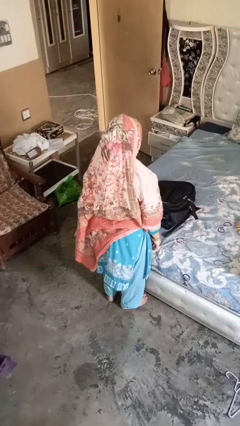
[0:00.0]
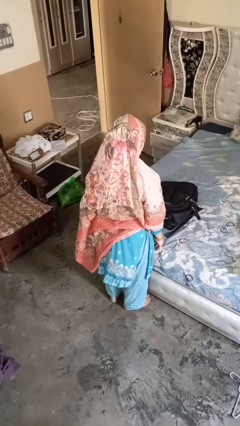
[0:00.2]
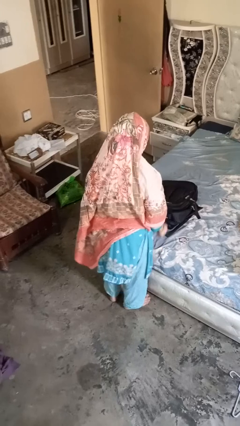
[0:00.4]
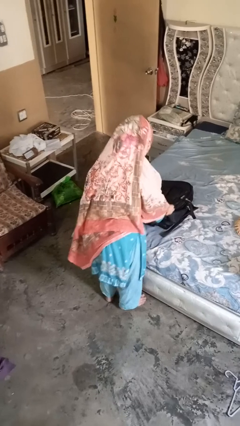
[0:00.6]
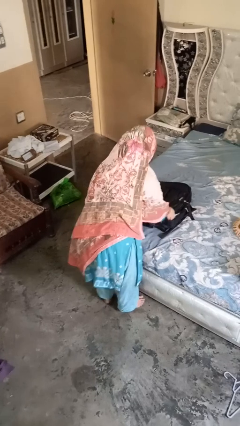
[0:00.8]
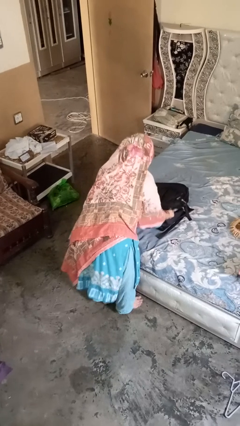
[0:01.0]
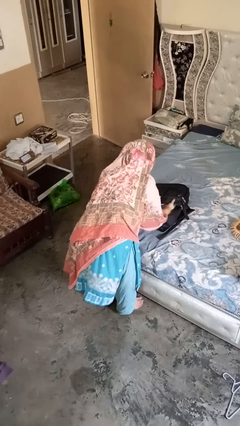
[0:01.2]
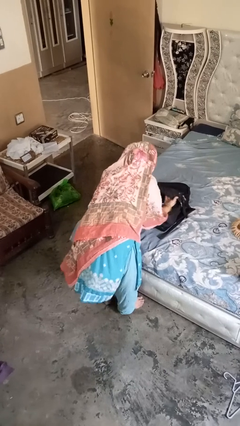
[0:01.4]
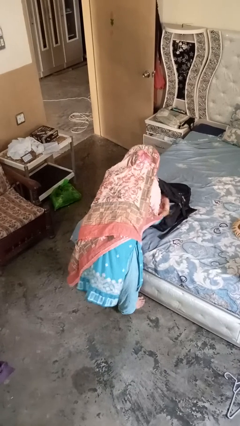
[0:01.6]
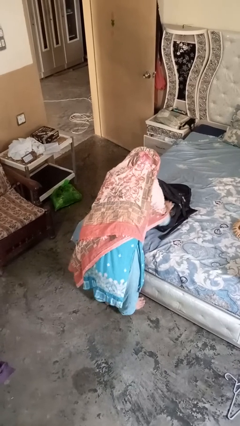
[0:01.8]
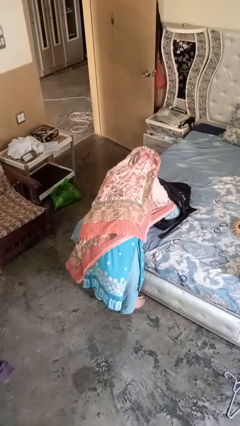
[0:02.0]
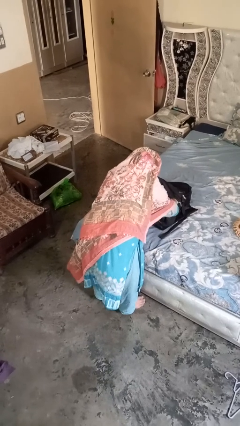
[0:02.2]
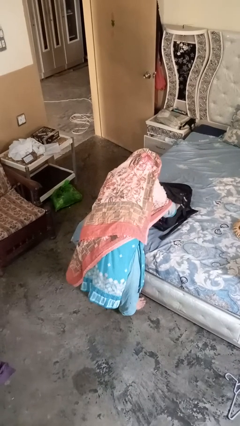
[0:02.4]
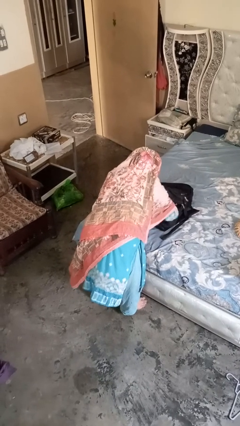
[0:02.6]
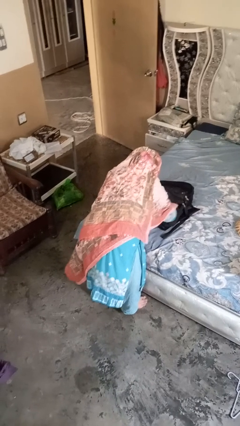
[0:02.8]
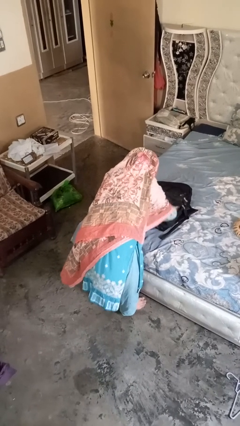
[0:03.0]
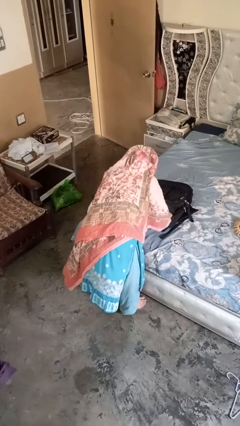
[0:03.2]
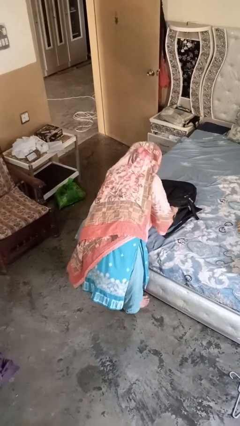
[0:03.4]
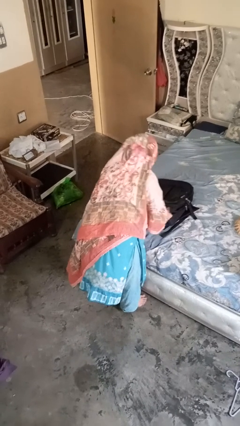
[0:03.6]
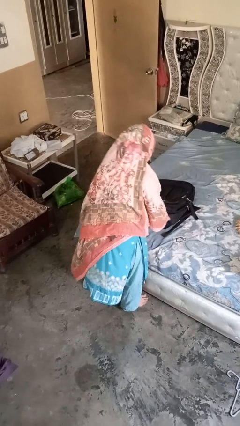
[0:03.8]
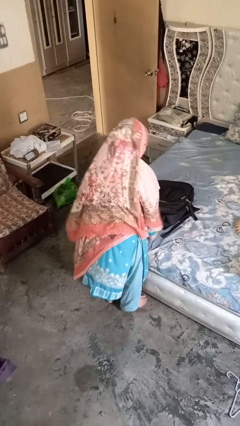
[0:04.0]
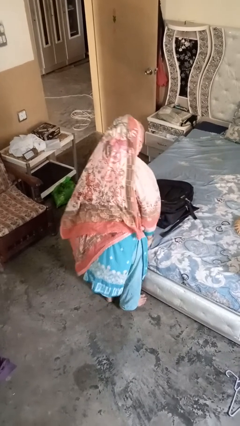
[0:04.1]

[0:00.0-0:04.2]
person searches in bag

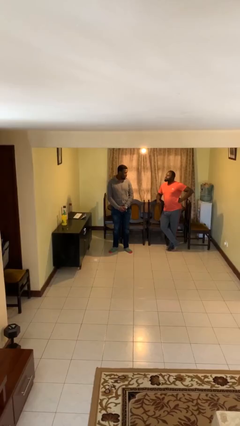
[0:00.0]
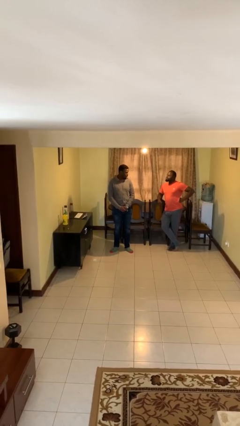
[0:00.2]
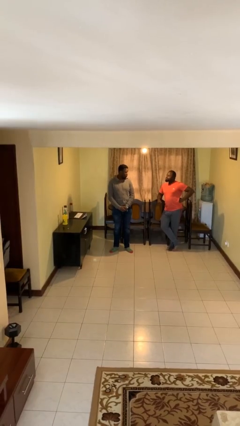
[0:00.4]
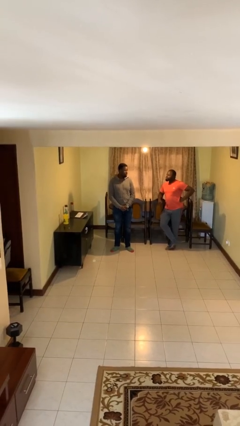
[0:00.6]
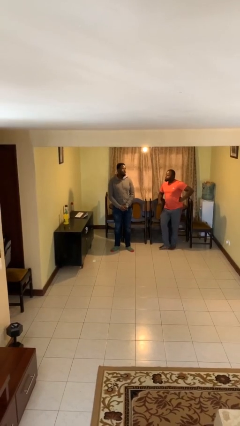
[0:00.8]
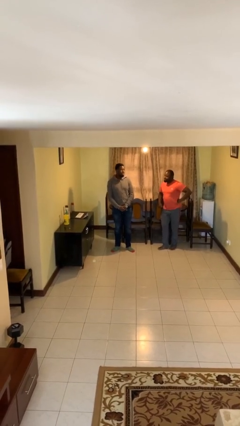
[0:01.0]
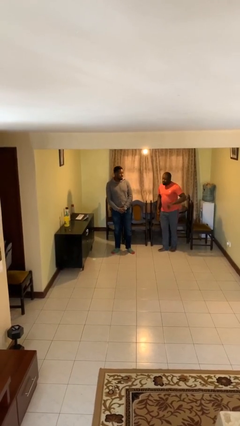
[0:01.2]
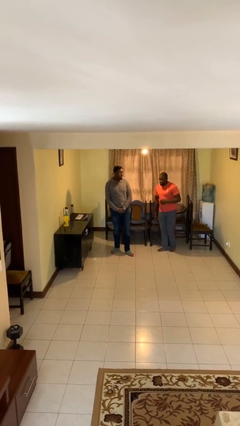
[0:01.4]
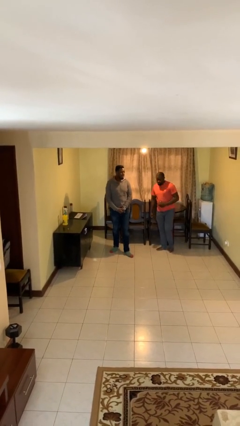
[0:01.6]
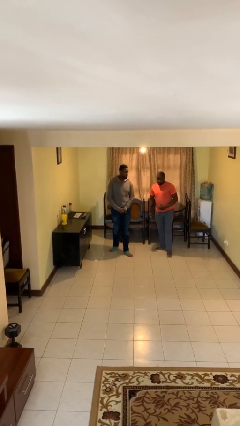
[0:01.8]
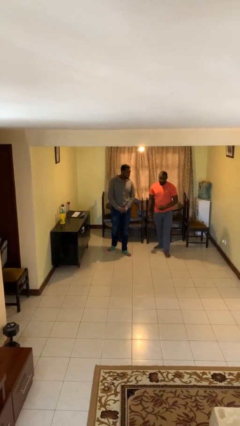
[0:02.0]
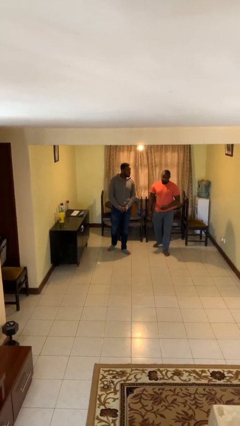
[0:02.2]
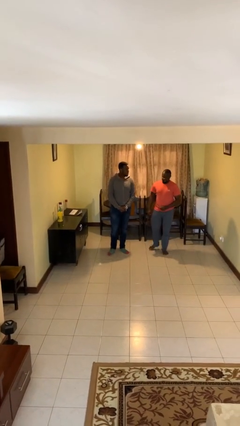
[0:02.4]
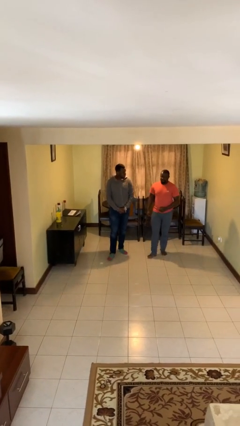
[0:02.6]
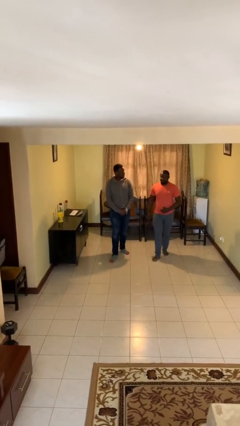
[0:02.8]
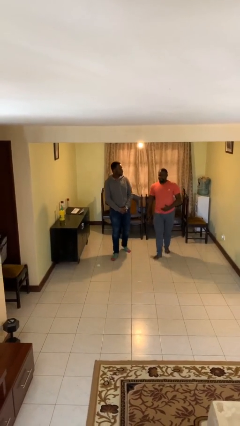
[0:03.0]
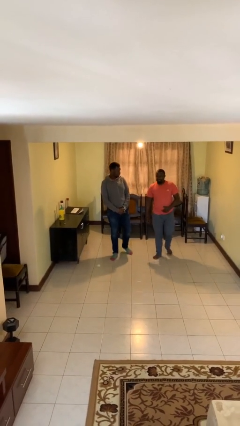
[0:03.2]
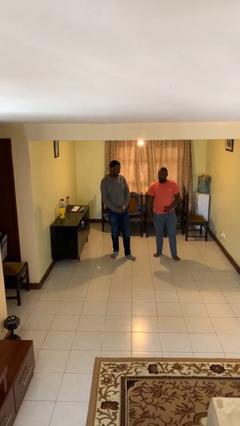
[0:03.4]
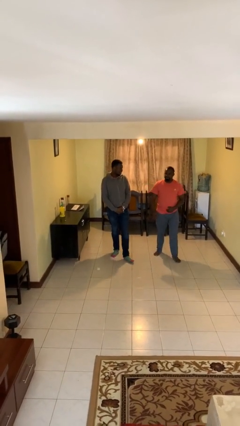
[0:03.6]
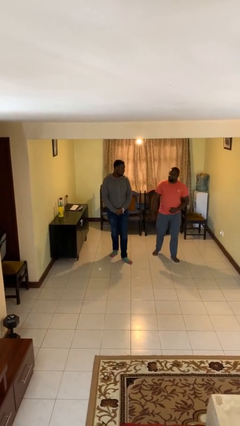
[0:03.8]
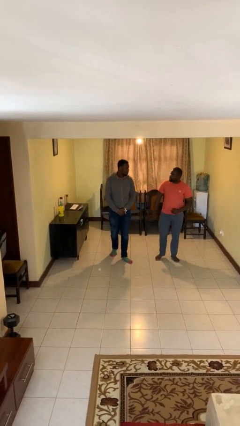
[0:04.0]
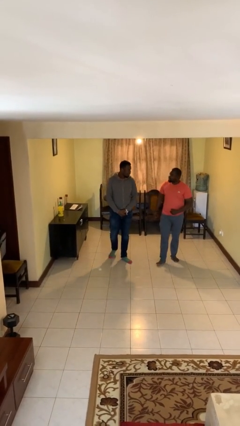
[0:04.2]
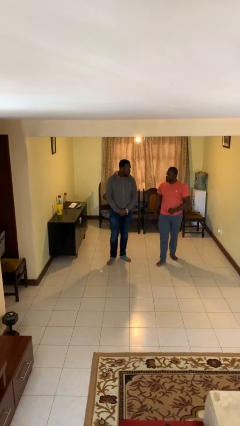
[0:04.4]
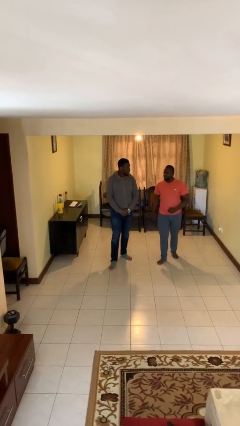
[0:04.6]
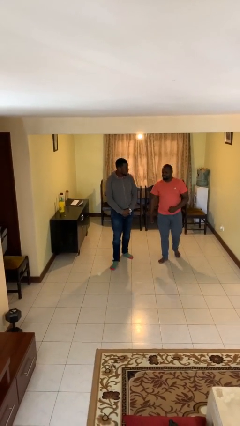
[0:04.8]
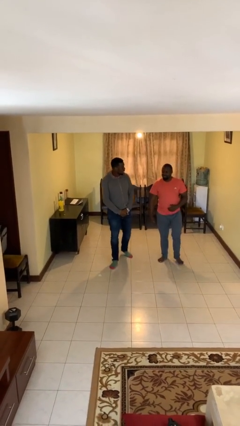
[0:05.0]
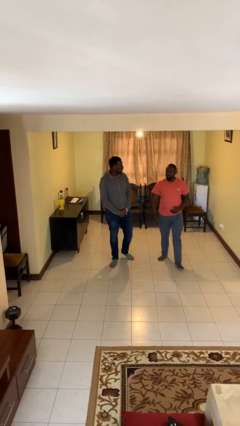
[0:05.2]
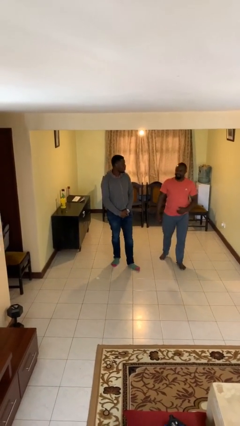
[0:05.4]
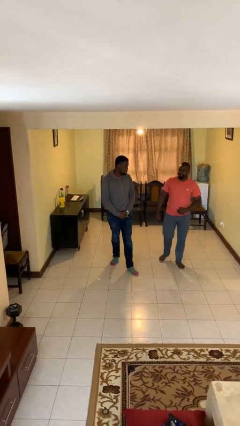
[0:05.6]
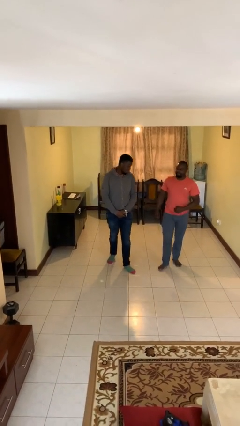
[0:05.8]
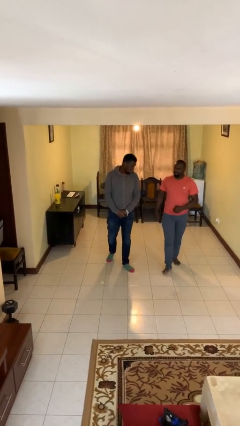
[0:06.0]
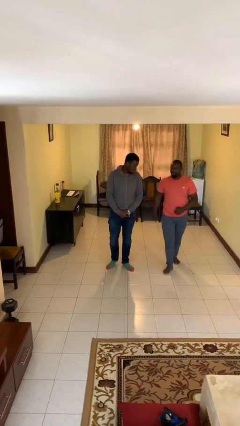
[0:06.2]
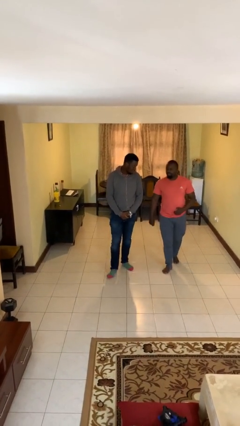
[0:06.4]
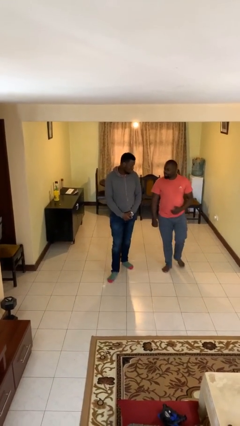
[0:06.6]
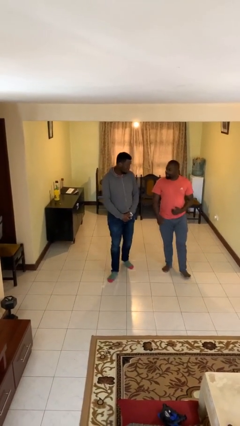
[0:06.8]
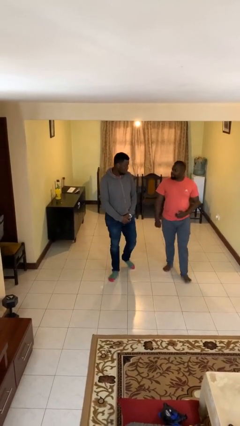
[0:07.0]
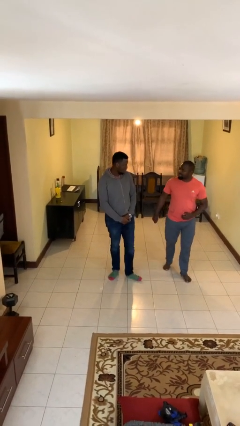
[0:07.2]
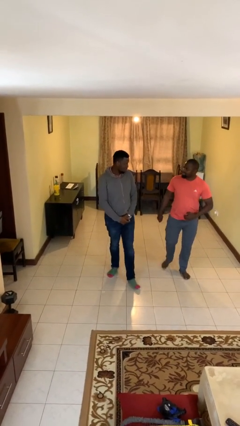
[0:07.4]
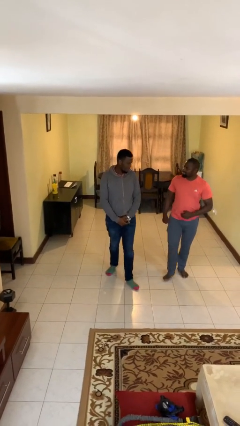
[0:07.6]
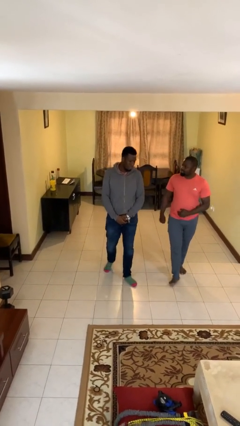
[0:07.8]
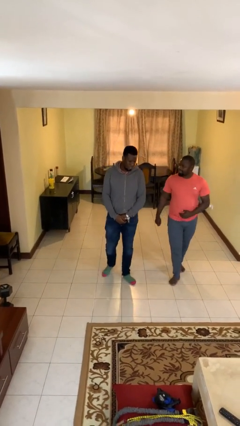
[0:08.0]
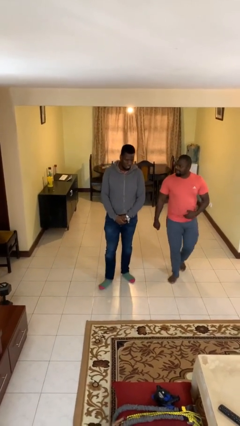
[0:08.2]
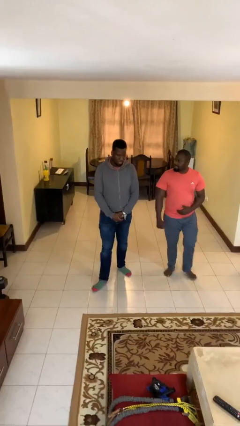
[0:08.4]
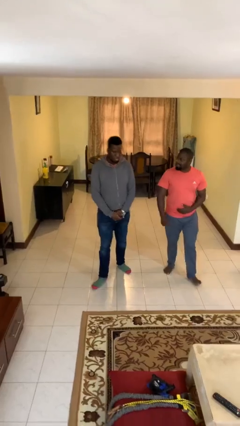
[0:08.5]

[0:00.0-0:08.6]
person talks to person

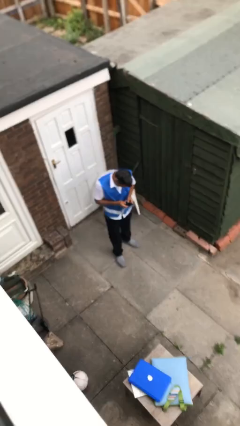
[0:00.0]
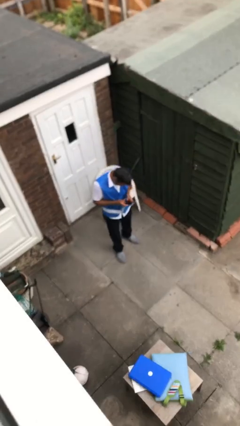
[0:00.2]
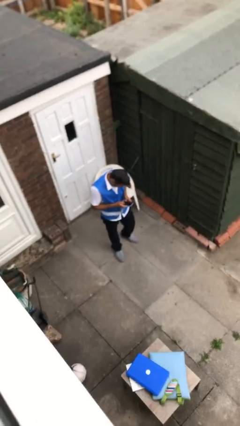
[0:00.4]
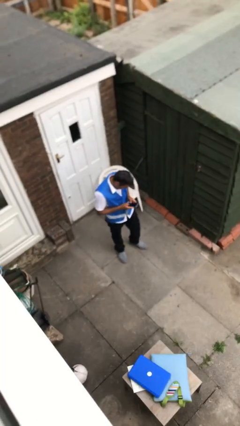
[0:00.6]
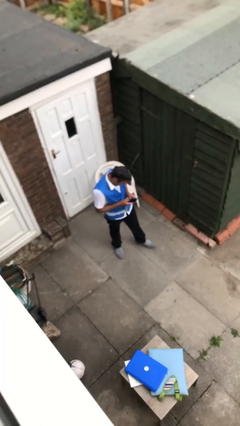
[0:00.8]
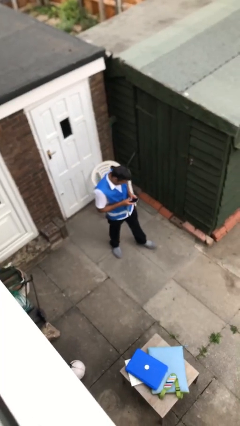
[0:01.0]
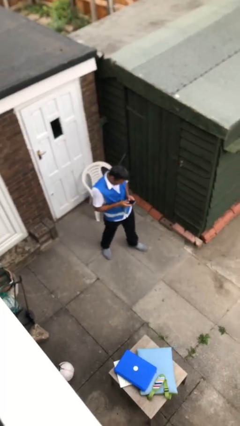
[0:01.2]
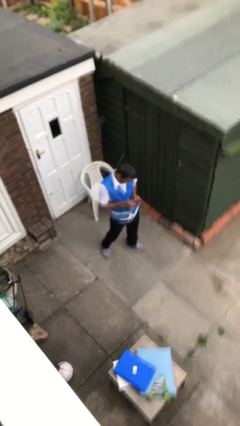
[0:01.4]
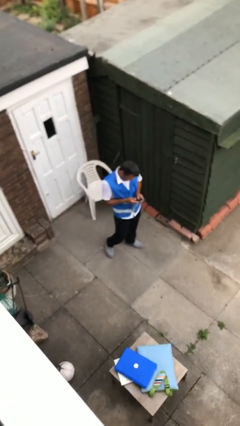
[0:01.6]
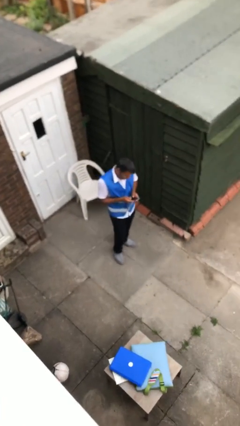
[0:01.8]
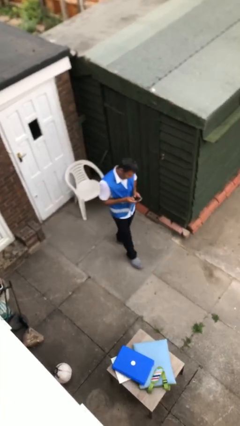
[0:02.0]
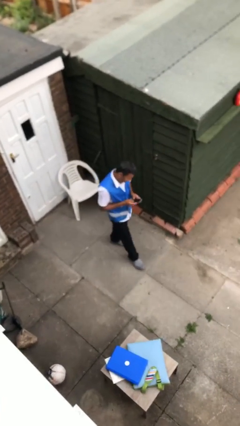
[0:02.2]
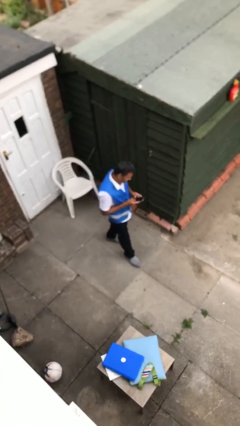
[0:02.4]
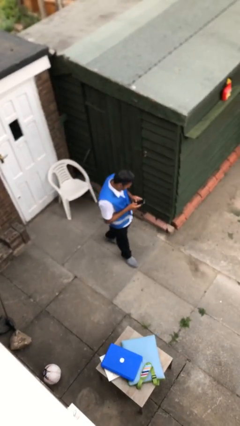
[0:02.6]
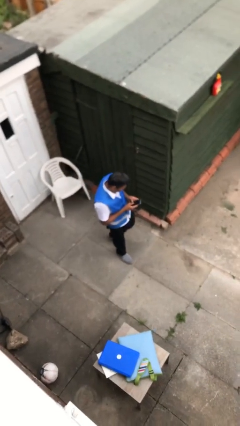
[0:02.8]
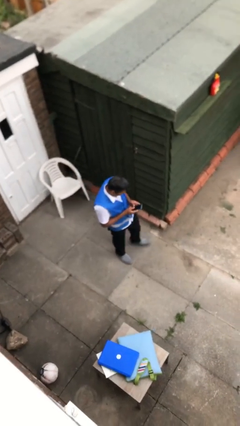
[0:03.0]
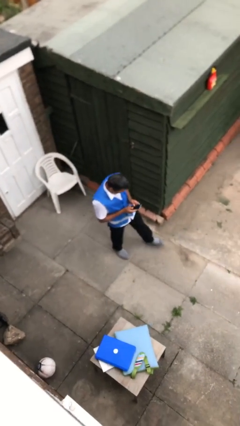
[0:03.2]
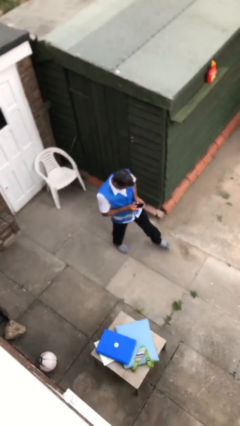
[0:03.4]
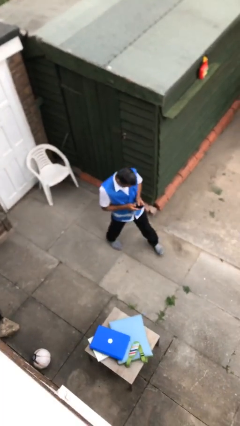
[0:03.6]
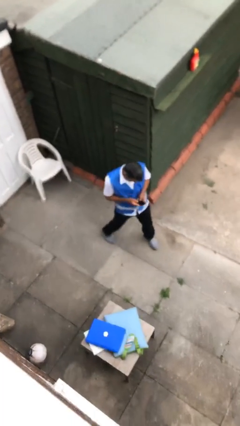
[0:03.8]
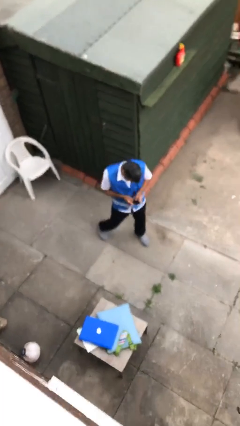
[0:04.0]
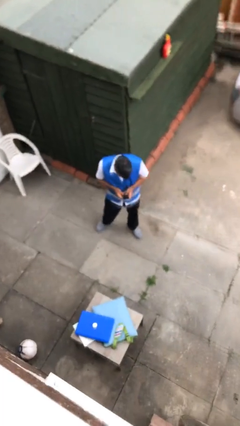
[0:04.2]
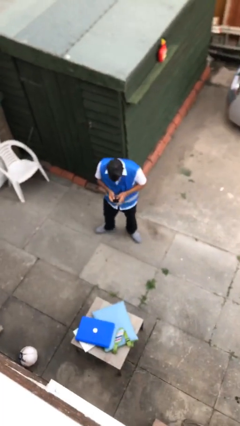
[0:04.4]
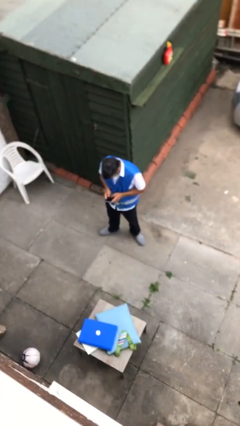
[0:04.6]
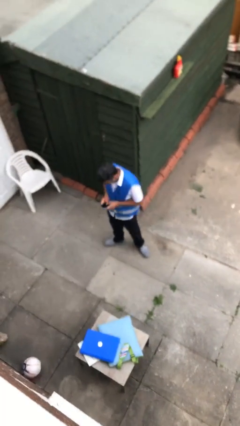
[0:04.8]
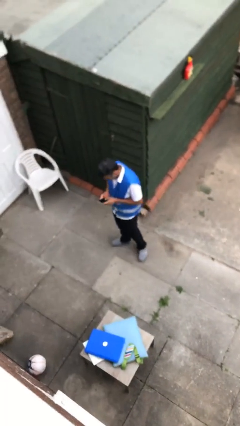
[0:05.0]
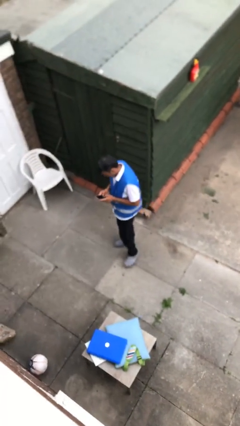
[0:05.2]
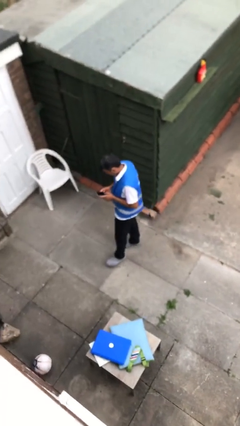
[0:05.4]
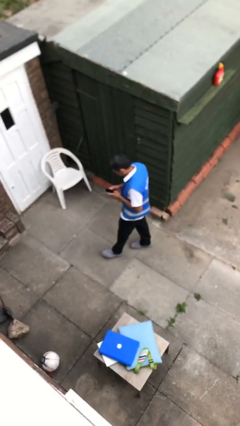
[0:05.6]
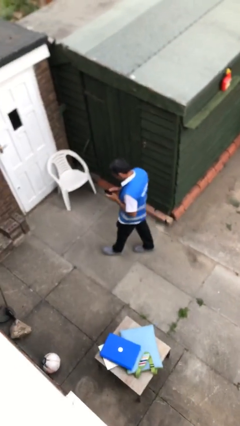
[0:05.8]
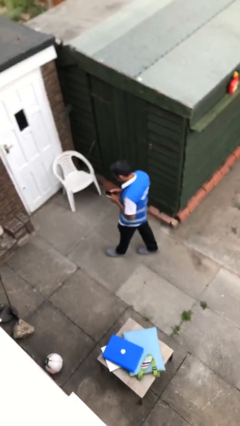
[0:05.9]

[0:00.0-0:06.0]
person texts on phone
